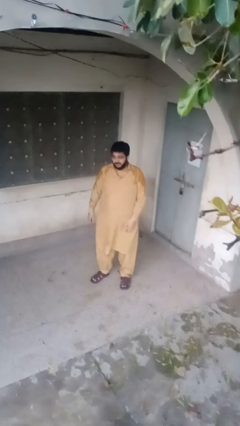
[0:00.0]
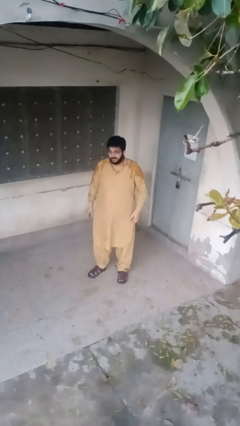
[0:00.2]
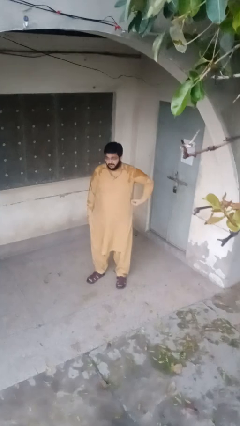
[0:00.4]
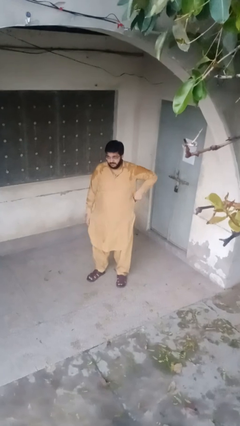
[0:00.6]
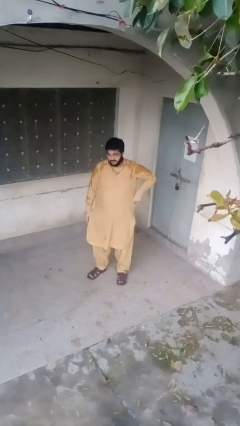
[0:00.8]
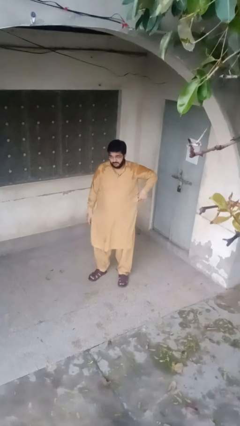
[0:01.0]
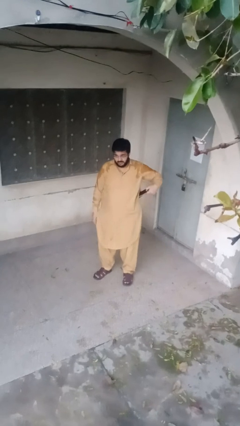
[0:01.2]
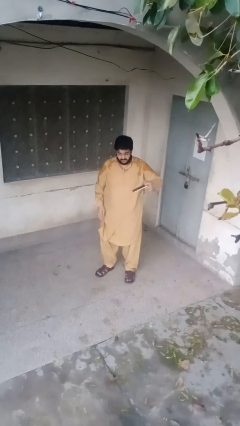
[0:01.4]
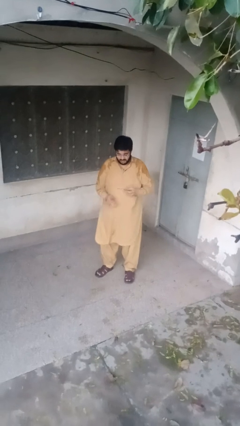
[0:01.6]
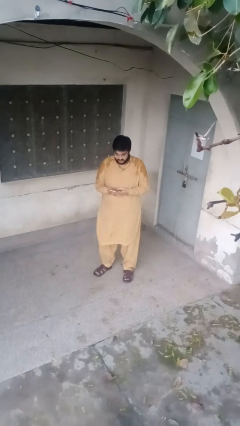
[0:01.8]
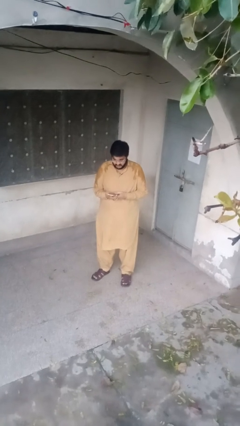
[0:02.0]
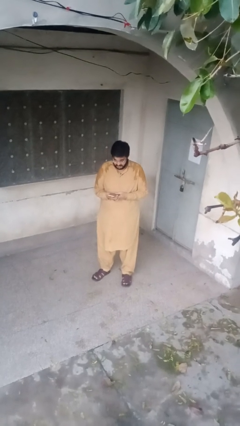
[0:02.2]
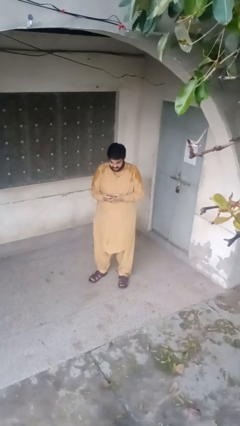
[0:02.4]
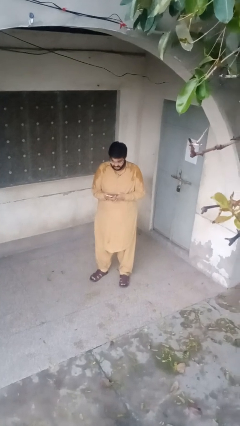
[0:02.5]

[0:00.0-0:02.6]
person takes phone from pocket

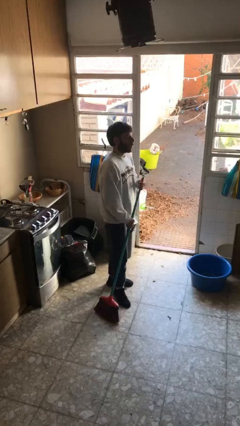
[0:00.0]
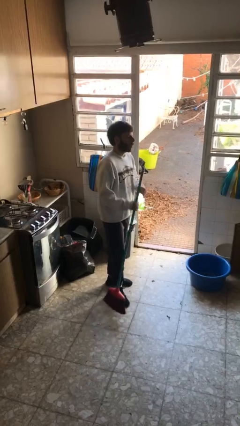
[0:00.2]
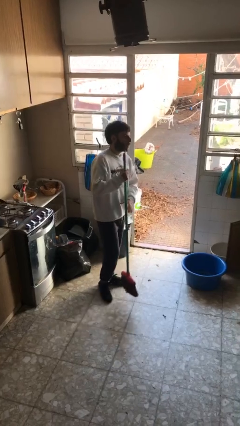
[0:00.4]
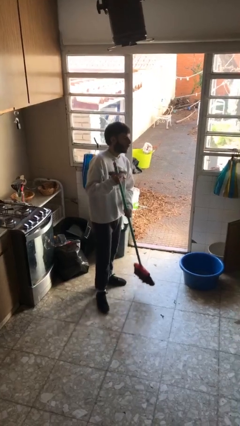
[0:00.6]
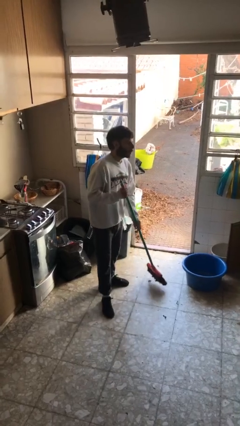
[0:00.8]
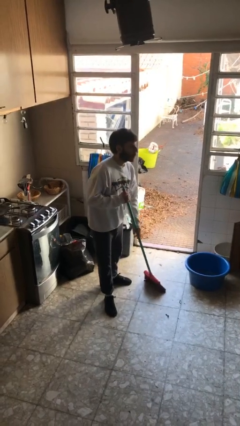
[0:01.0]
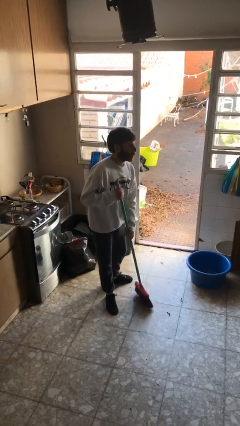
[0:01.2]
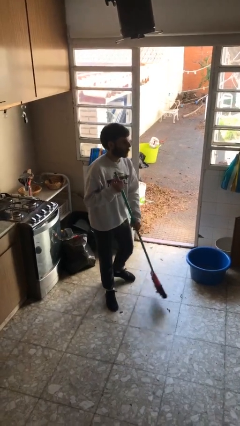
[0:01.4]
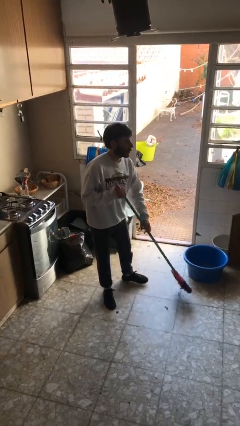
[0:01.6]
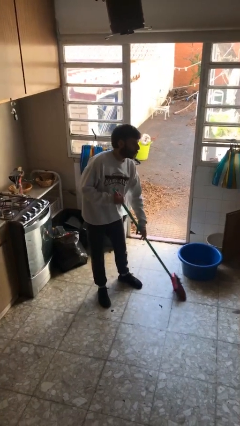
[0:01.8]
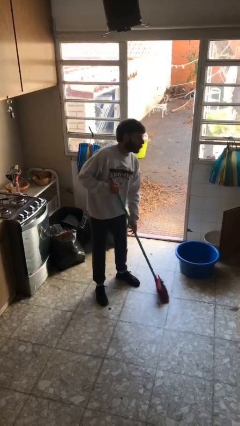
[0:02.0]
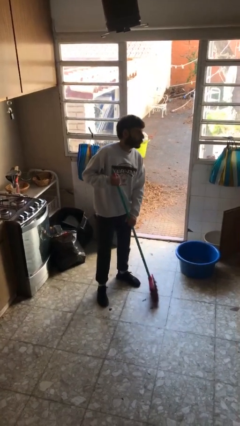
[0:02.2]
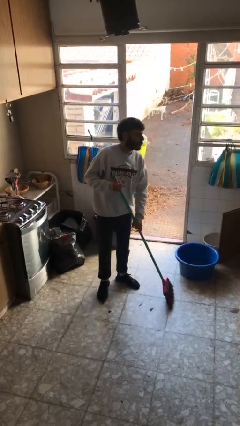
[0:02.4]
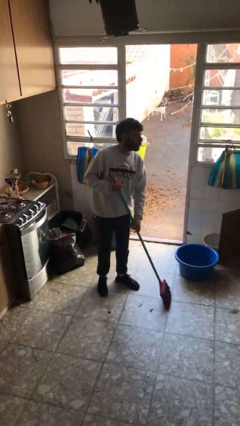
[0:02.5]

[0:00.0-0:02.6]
person sweeps floor

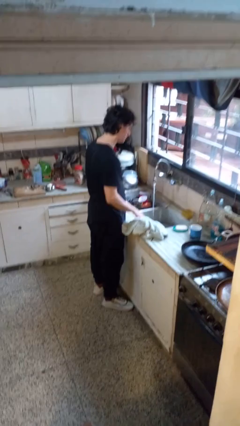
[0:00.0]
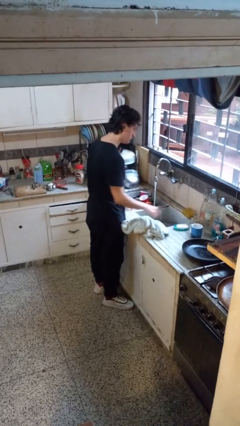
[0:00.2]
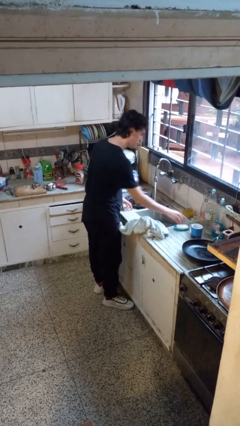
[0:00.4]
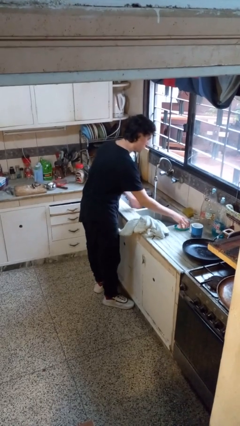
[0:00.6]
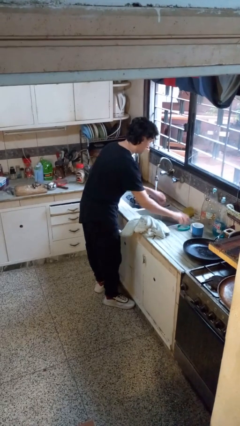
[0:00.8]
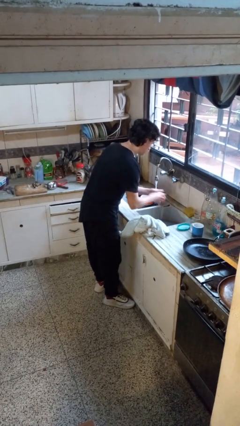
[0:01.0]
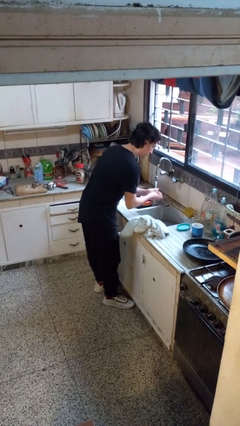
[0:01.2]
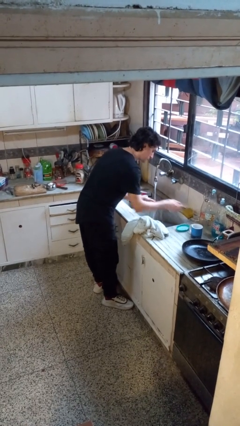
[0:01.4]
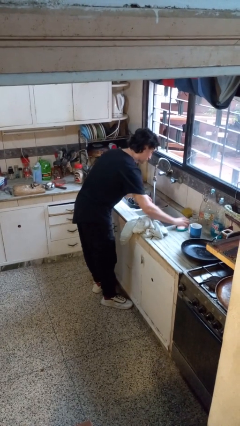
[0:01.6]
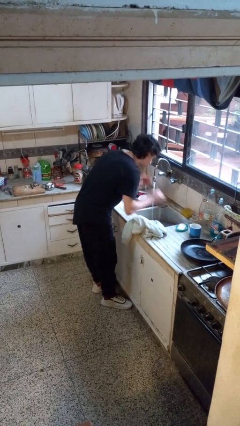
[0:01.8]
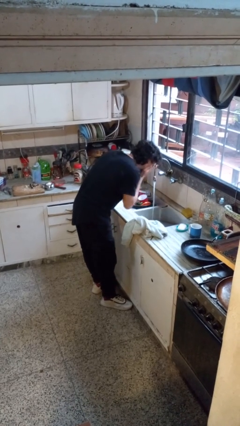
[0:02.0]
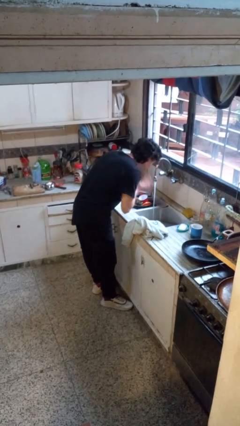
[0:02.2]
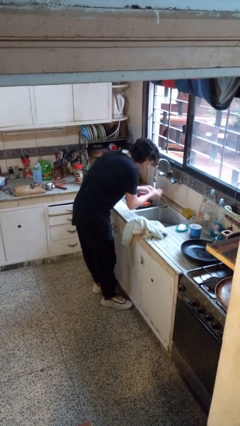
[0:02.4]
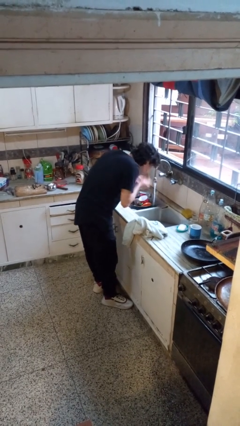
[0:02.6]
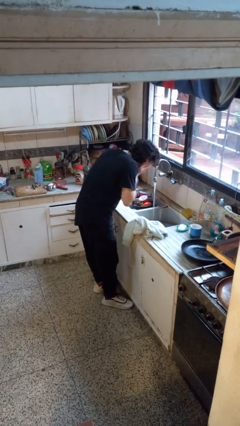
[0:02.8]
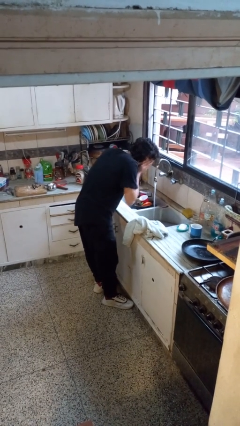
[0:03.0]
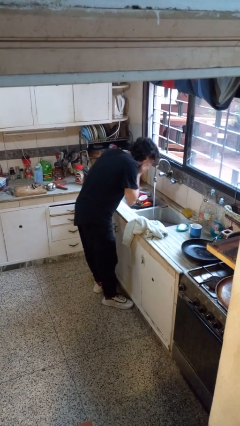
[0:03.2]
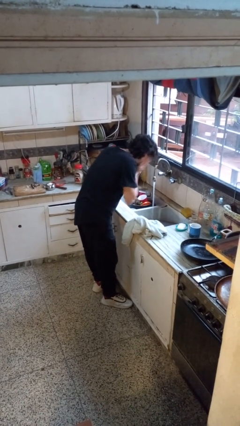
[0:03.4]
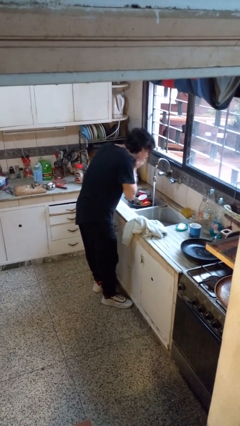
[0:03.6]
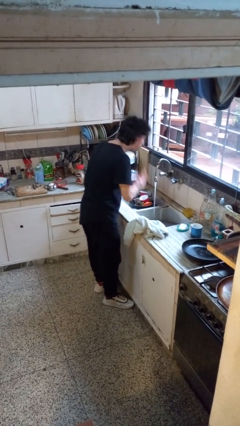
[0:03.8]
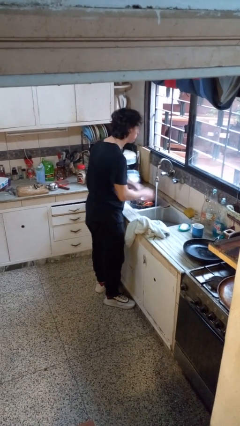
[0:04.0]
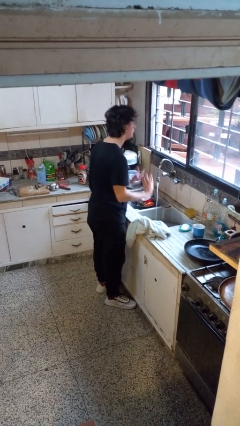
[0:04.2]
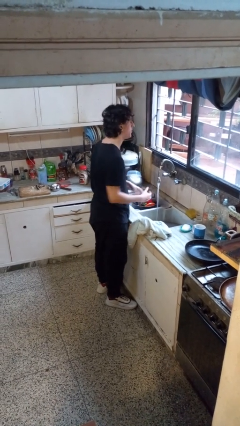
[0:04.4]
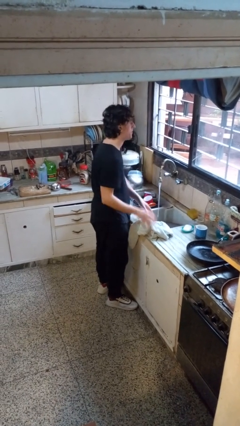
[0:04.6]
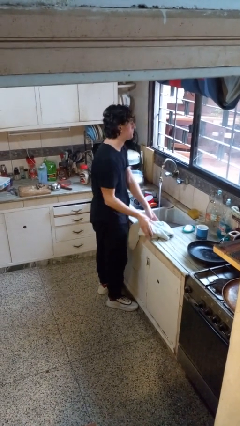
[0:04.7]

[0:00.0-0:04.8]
person washes face

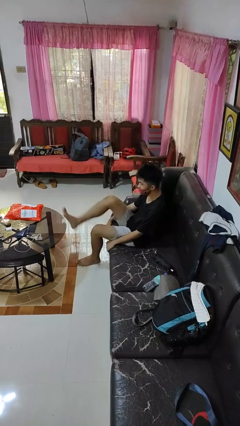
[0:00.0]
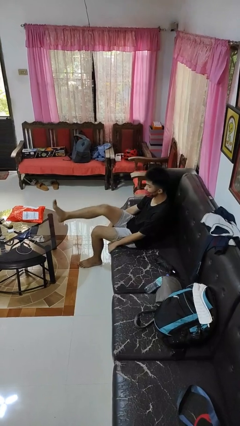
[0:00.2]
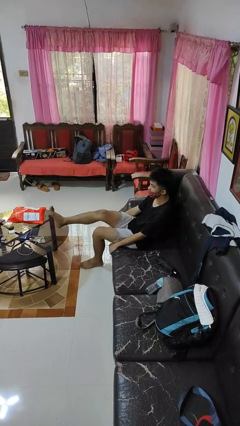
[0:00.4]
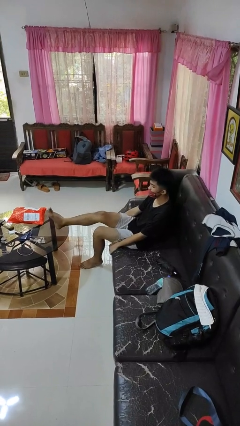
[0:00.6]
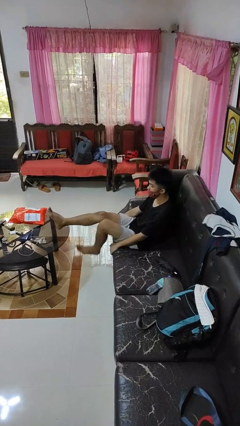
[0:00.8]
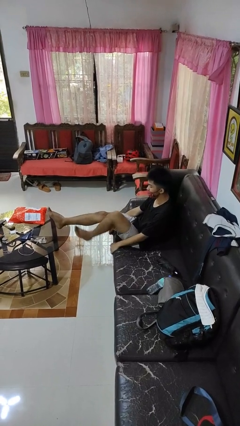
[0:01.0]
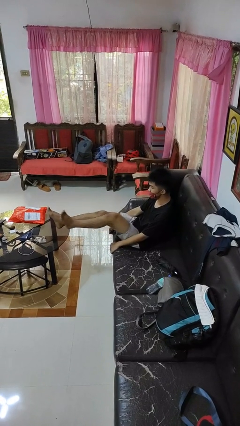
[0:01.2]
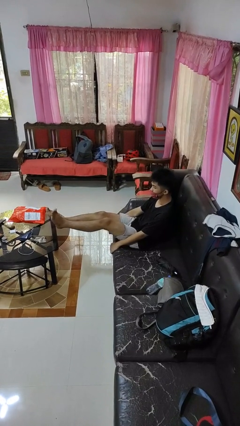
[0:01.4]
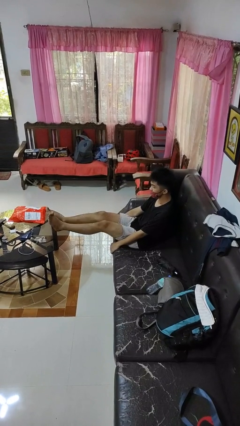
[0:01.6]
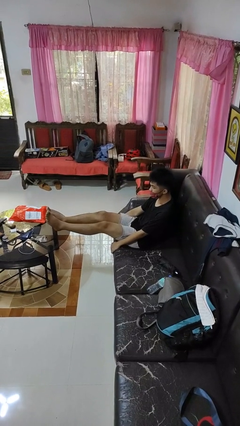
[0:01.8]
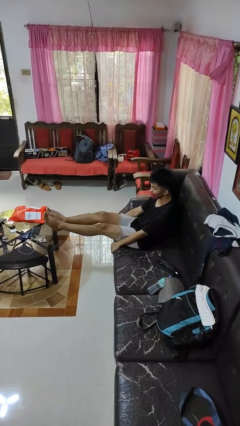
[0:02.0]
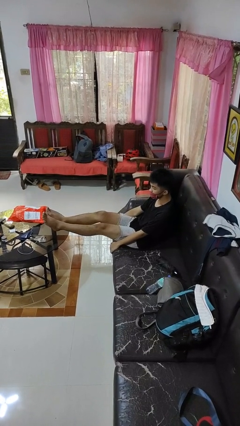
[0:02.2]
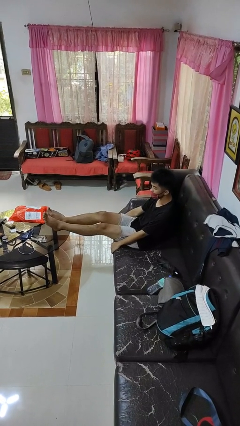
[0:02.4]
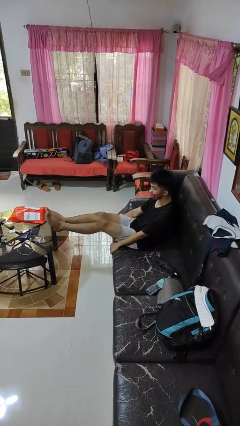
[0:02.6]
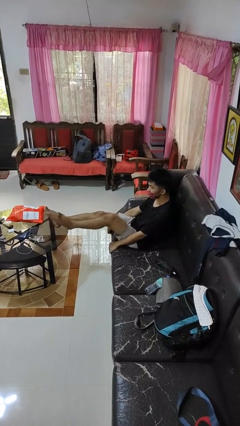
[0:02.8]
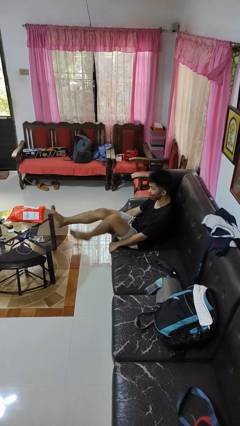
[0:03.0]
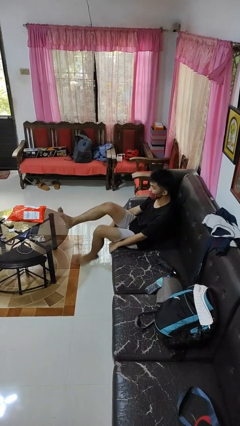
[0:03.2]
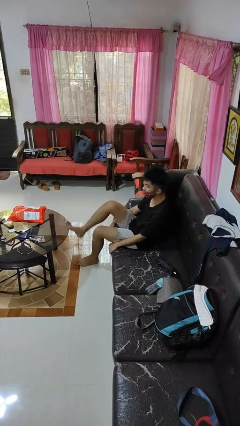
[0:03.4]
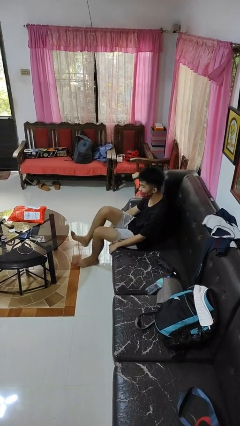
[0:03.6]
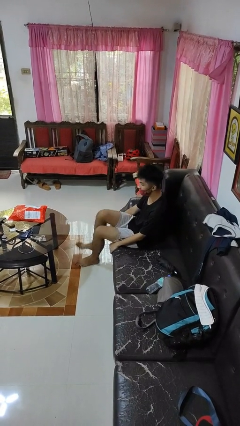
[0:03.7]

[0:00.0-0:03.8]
person puts feet up

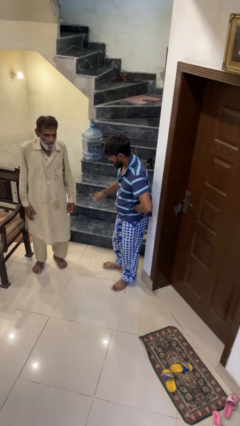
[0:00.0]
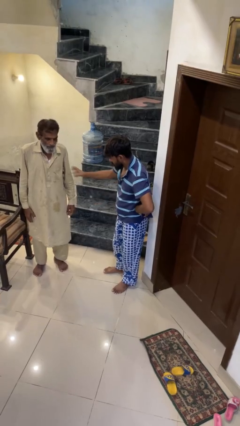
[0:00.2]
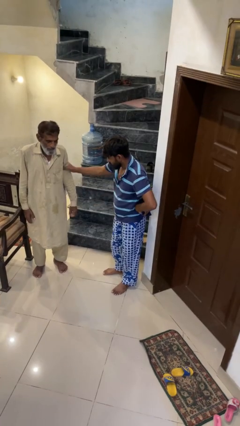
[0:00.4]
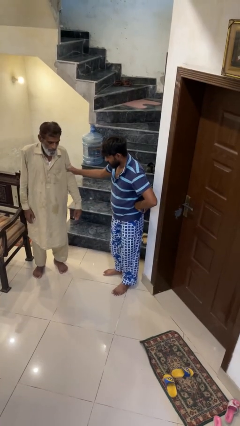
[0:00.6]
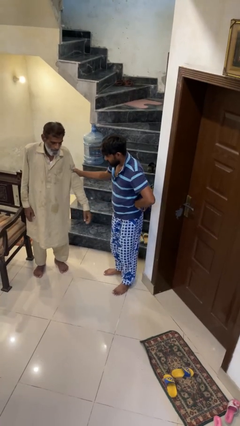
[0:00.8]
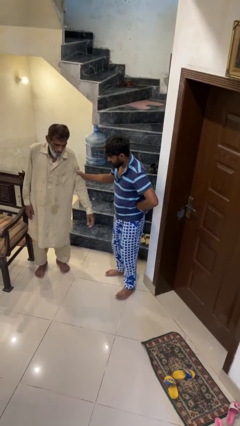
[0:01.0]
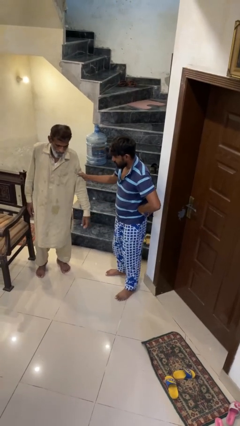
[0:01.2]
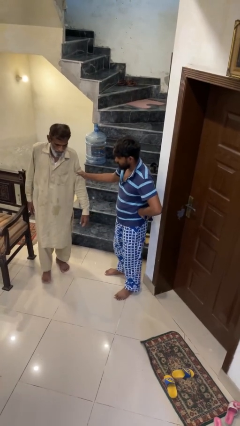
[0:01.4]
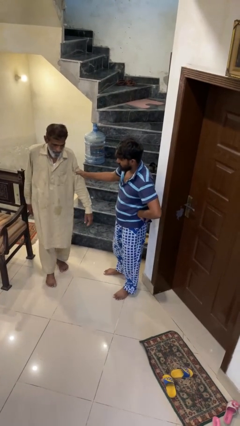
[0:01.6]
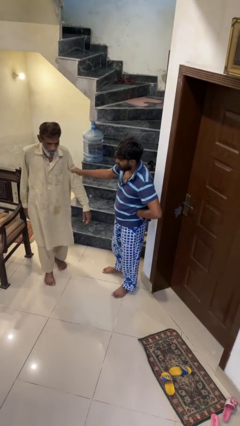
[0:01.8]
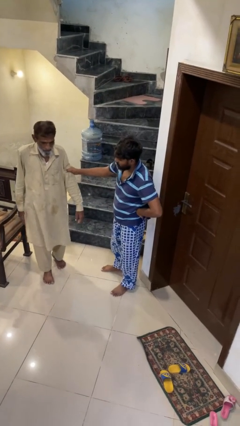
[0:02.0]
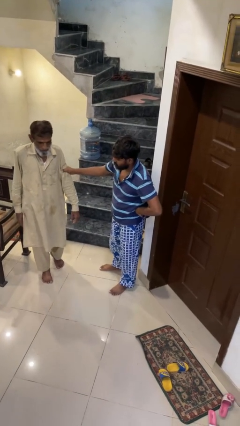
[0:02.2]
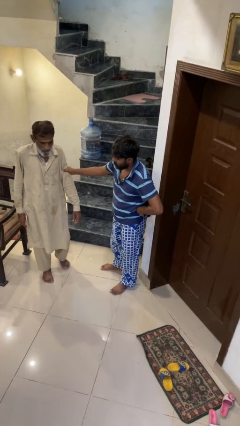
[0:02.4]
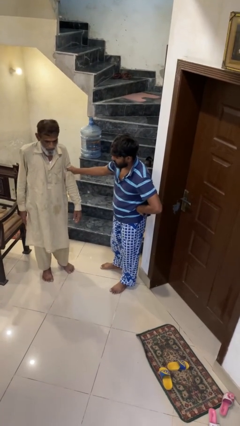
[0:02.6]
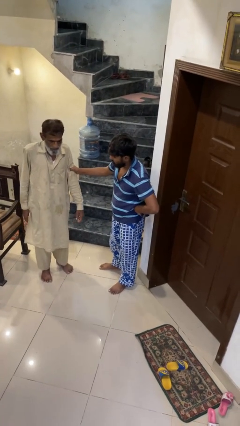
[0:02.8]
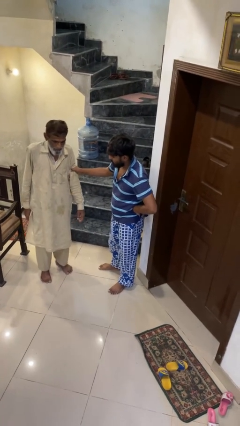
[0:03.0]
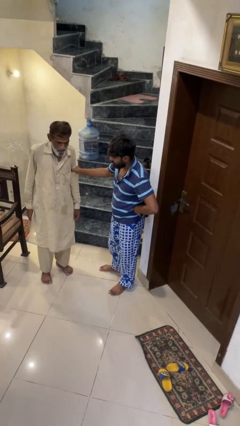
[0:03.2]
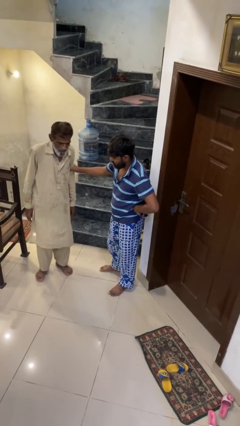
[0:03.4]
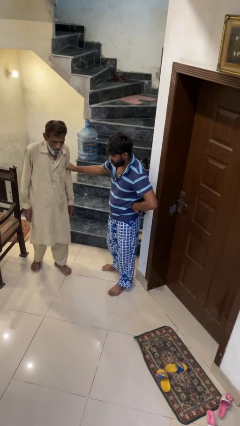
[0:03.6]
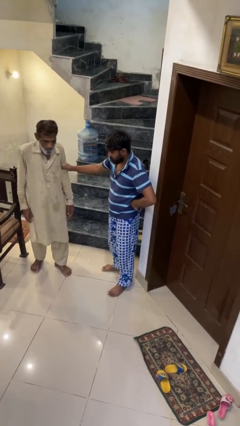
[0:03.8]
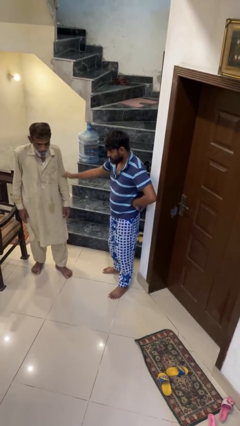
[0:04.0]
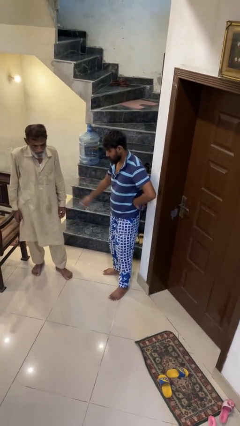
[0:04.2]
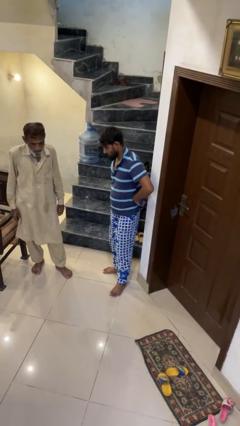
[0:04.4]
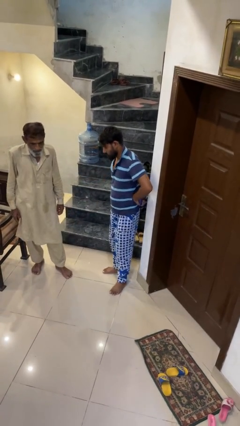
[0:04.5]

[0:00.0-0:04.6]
person grabs person by bicep
